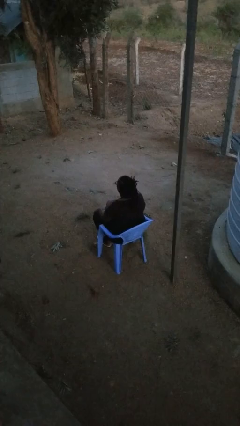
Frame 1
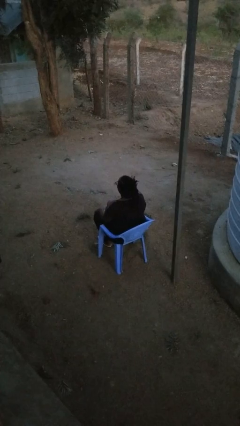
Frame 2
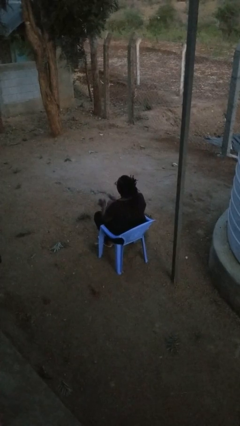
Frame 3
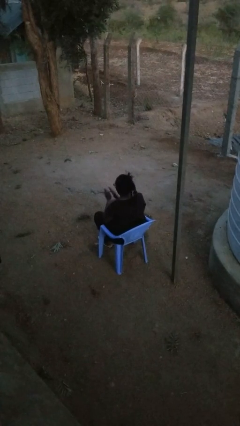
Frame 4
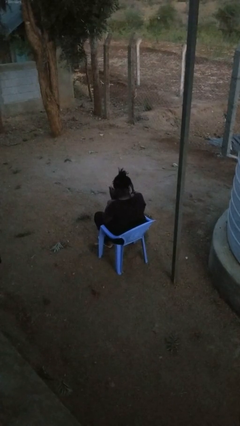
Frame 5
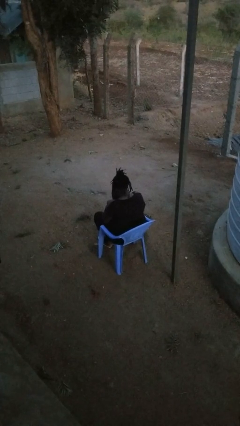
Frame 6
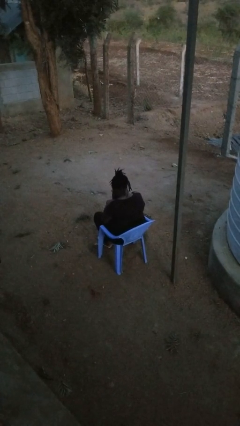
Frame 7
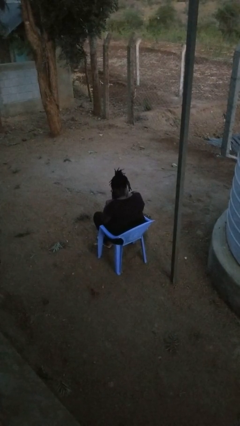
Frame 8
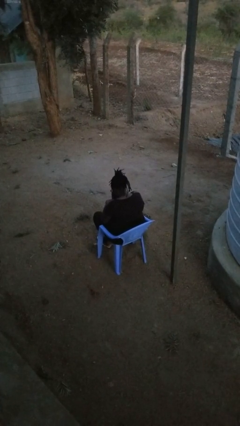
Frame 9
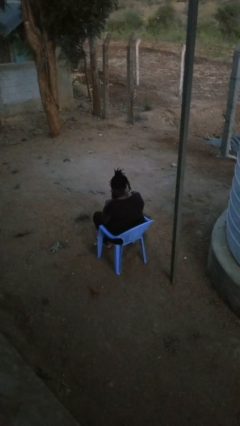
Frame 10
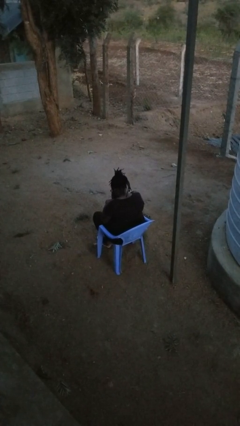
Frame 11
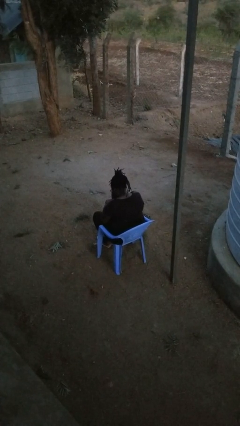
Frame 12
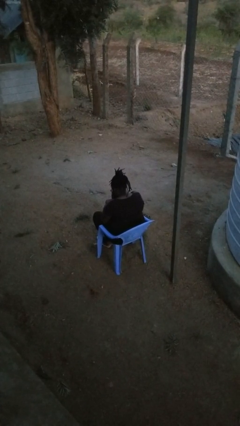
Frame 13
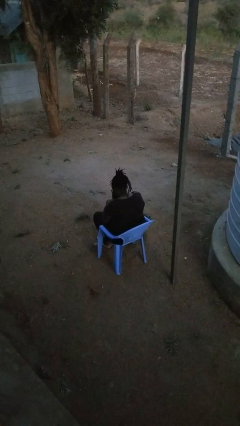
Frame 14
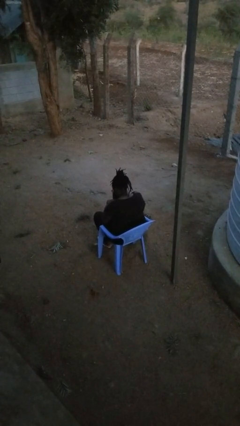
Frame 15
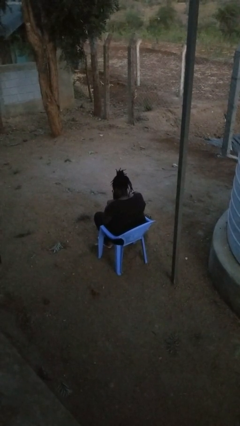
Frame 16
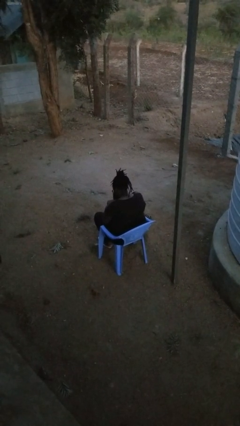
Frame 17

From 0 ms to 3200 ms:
person prays

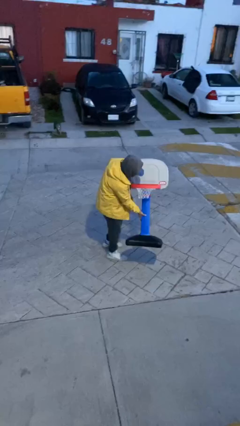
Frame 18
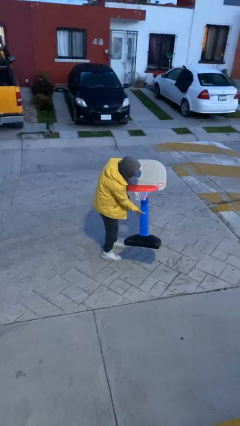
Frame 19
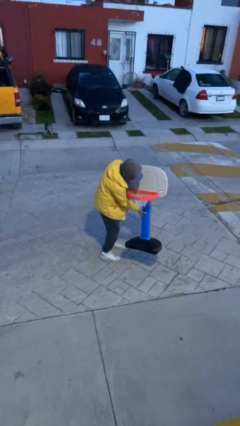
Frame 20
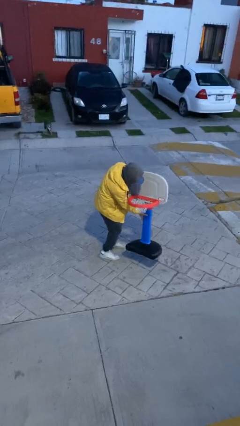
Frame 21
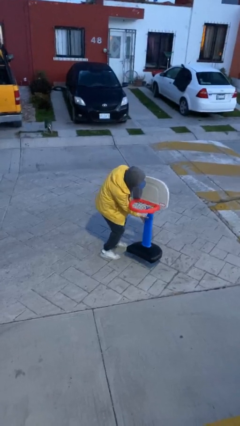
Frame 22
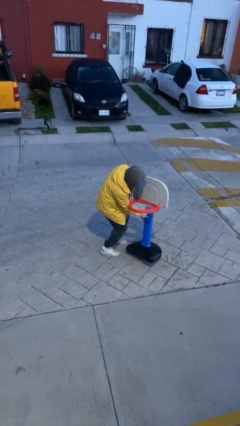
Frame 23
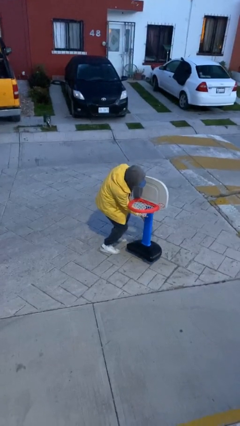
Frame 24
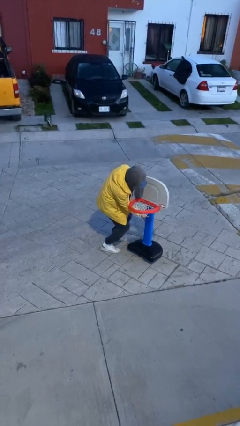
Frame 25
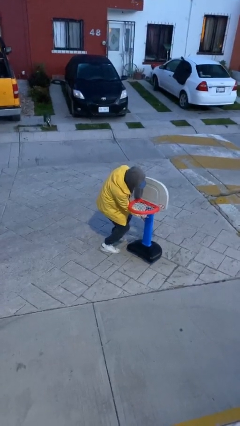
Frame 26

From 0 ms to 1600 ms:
person puts down object on floor

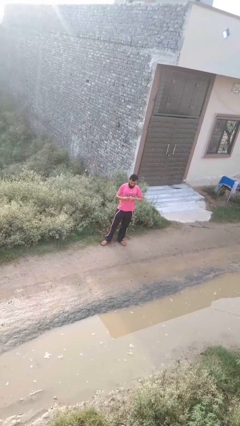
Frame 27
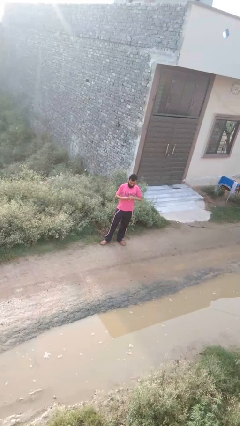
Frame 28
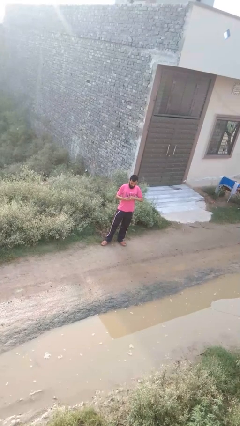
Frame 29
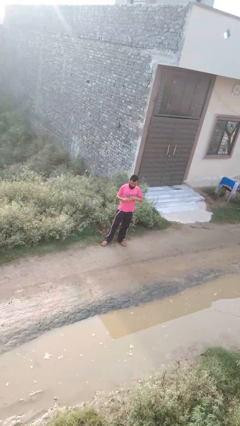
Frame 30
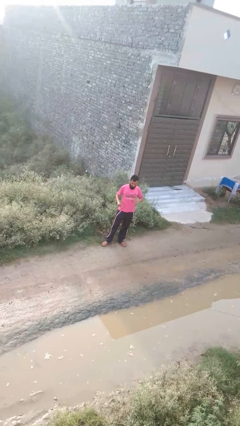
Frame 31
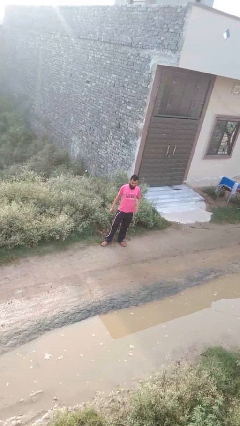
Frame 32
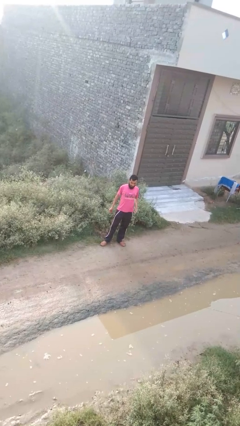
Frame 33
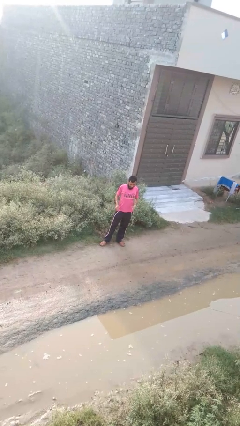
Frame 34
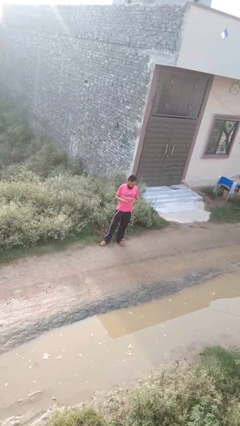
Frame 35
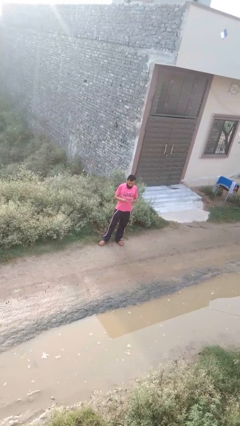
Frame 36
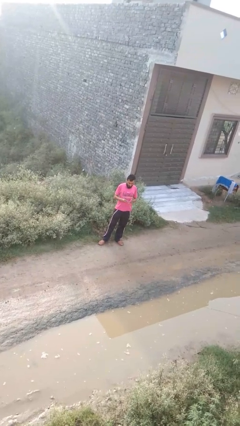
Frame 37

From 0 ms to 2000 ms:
person puts on ring

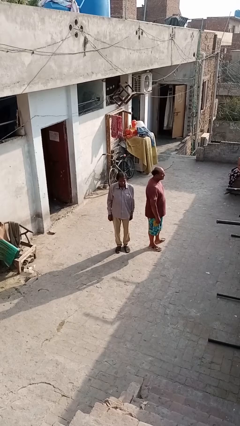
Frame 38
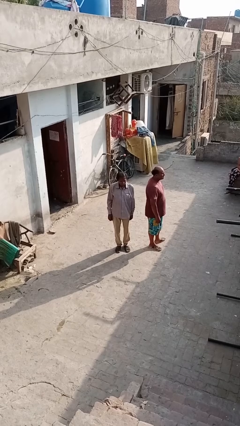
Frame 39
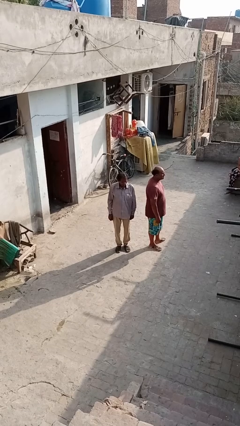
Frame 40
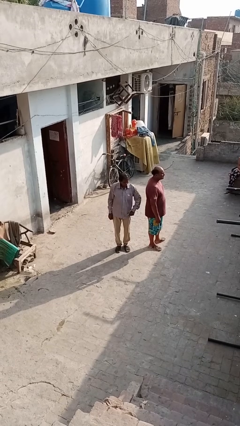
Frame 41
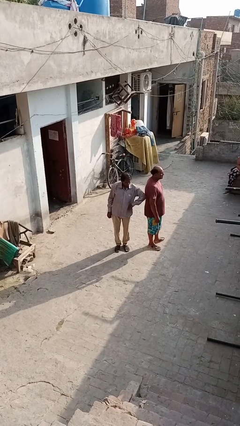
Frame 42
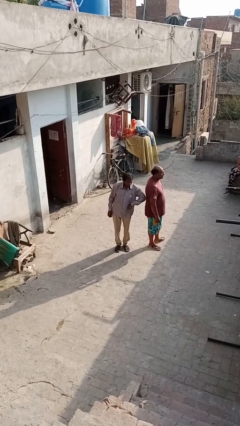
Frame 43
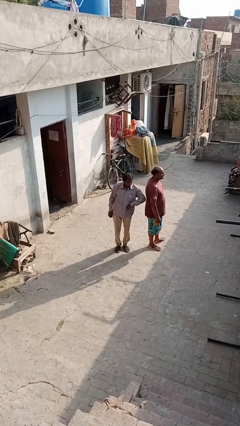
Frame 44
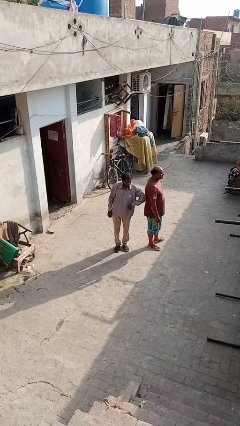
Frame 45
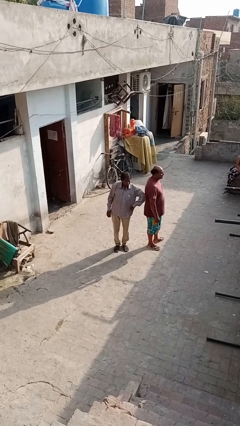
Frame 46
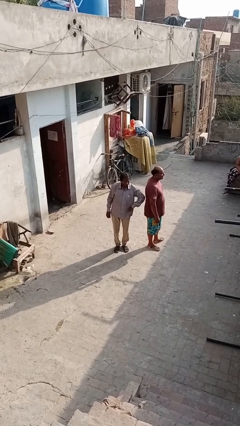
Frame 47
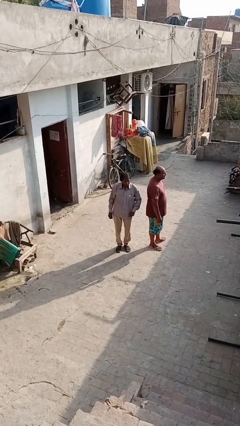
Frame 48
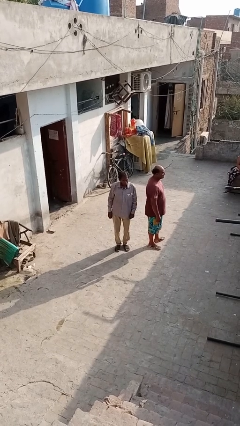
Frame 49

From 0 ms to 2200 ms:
person nudges person with elbow

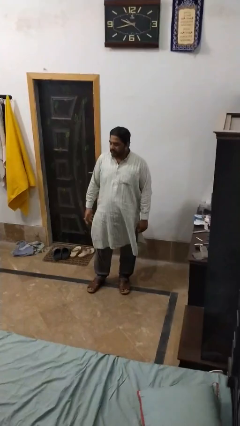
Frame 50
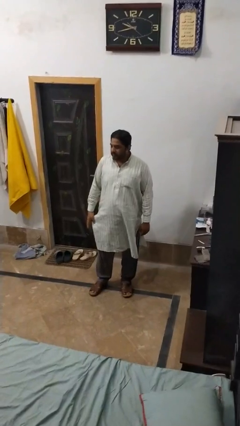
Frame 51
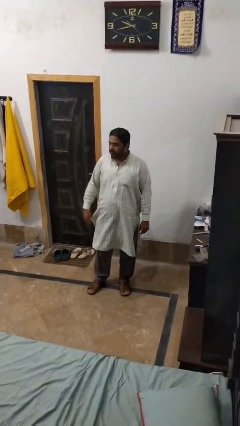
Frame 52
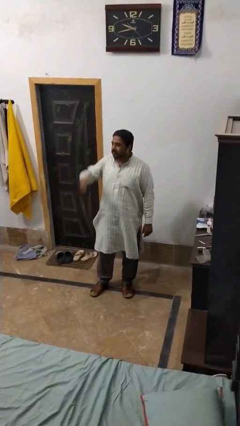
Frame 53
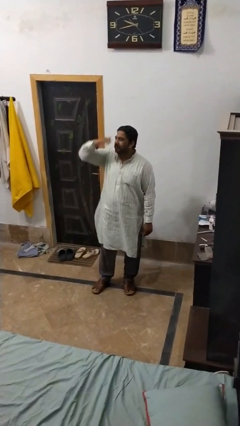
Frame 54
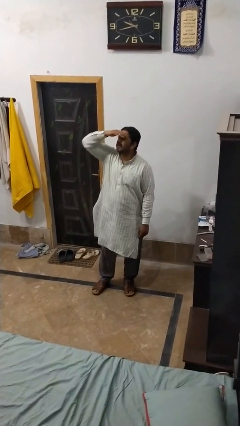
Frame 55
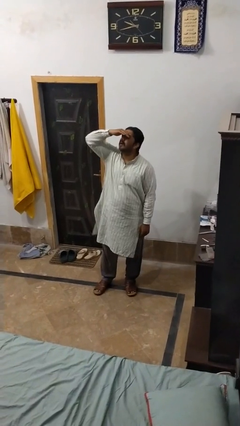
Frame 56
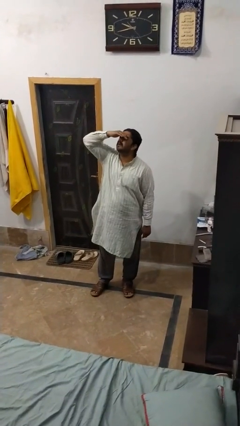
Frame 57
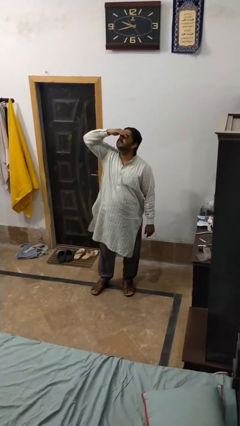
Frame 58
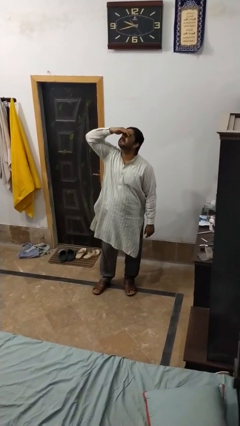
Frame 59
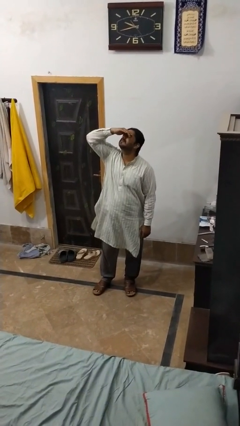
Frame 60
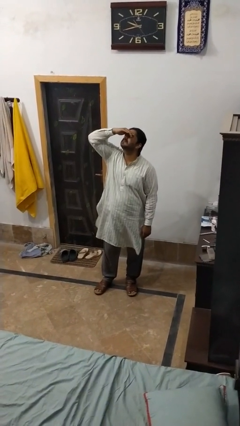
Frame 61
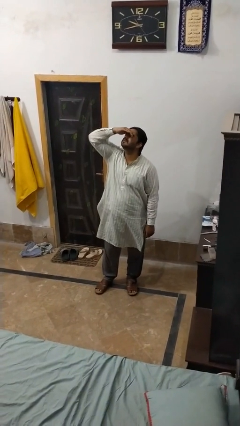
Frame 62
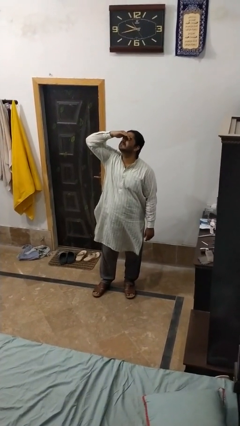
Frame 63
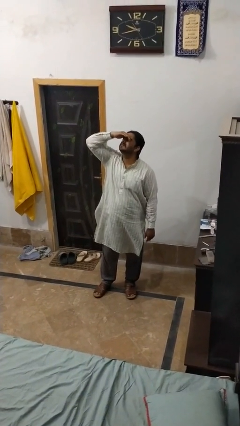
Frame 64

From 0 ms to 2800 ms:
person shades eyes

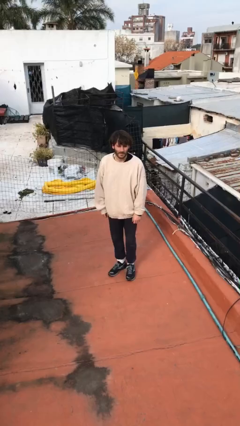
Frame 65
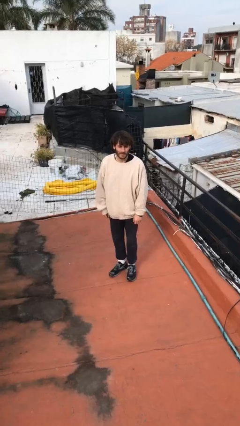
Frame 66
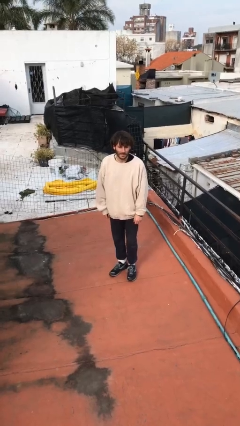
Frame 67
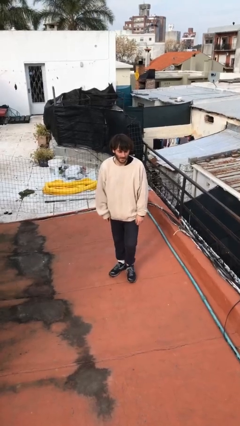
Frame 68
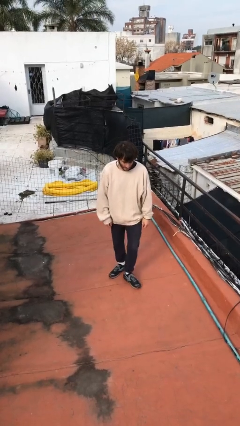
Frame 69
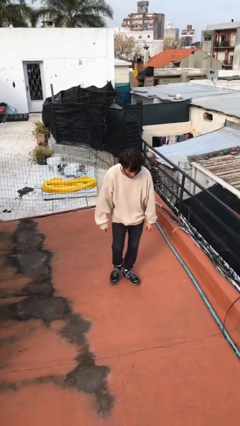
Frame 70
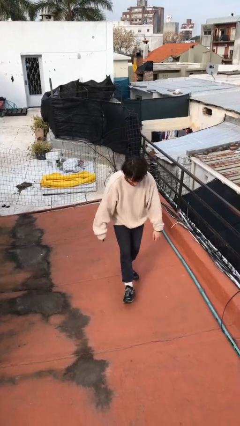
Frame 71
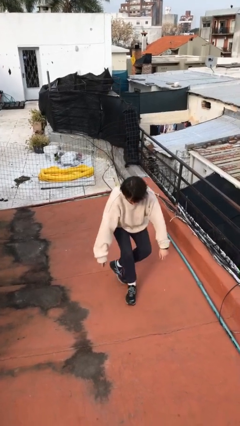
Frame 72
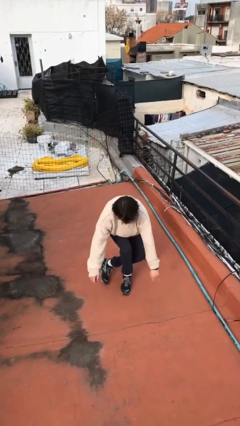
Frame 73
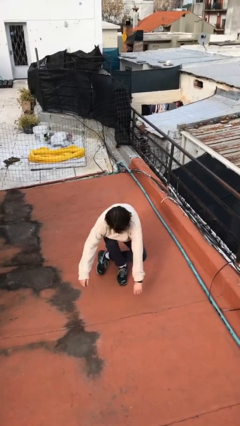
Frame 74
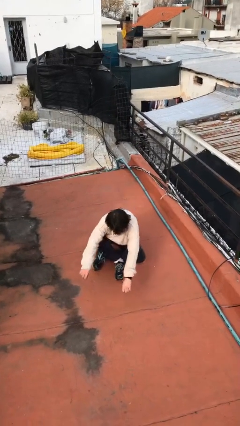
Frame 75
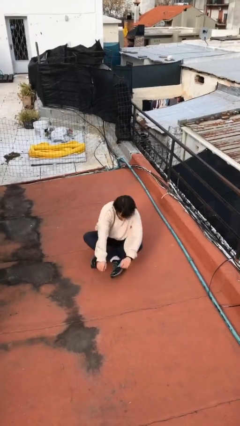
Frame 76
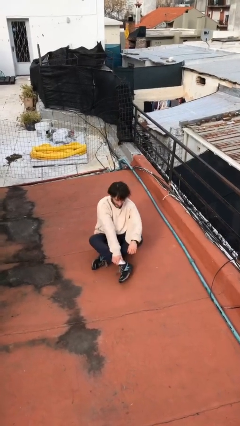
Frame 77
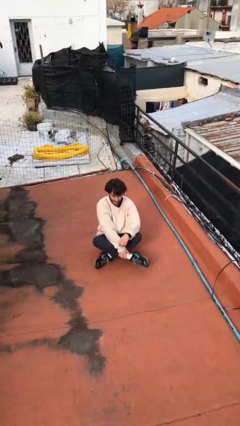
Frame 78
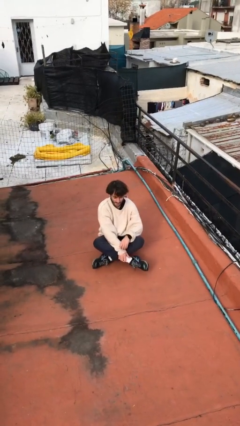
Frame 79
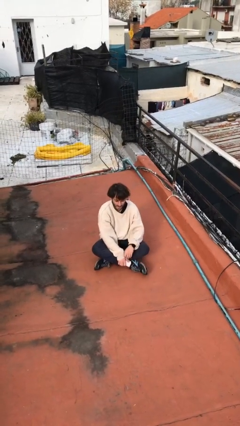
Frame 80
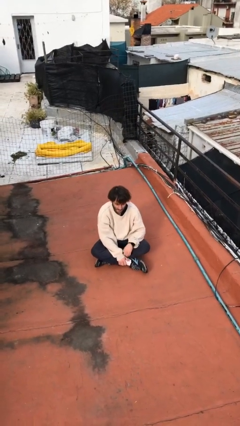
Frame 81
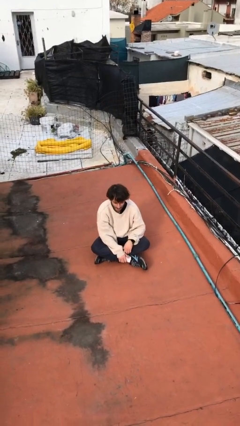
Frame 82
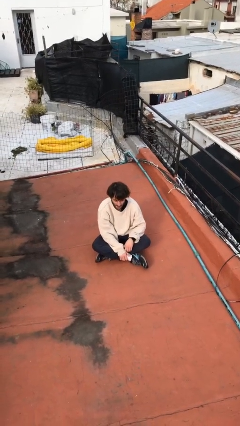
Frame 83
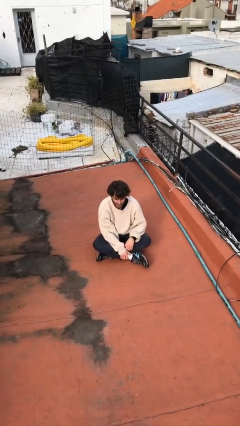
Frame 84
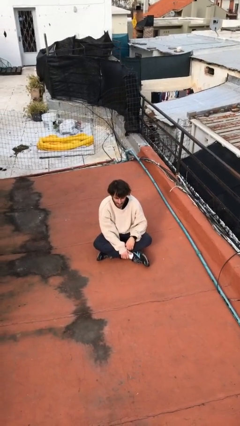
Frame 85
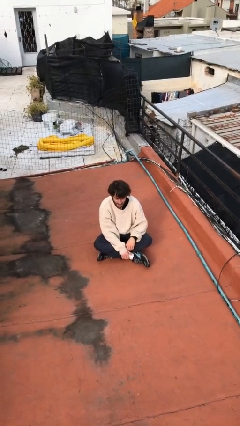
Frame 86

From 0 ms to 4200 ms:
person sits crisscross

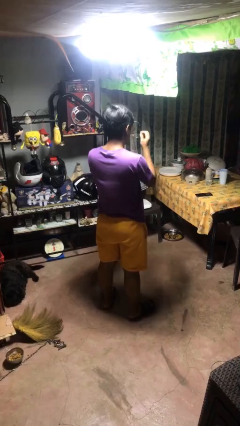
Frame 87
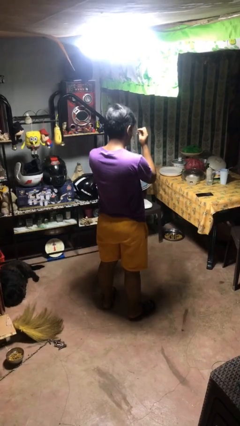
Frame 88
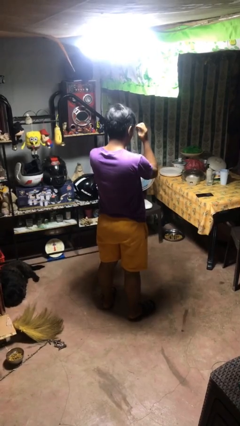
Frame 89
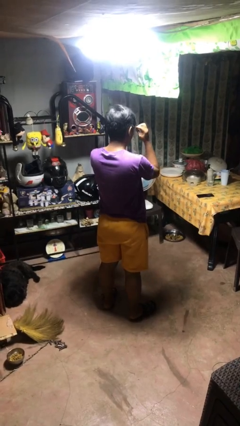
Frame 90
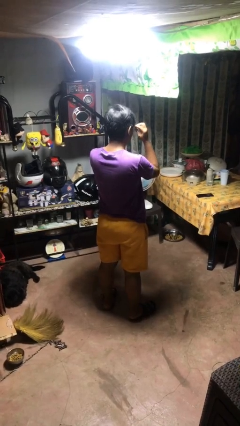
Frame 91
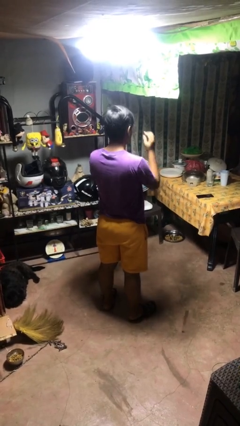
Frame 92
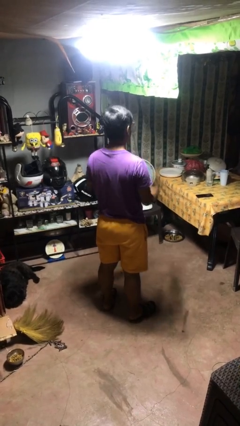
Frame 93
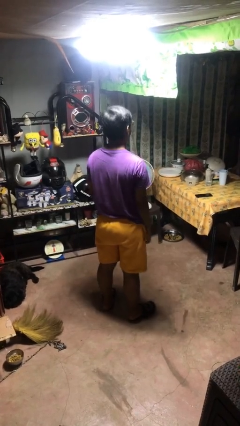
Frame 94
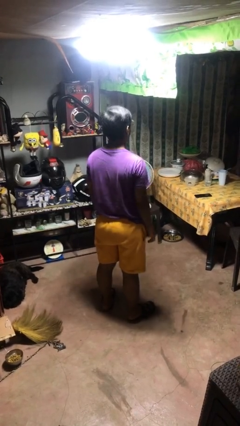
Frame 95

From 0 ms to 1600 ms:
person puts on glasses
